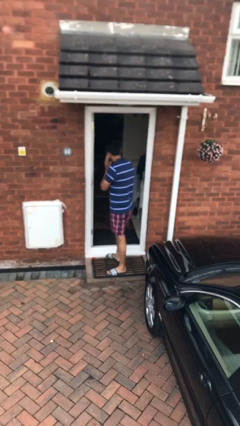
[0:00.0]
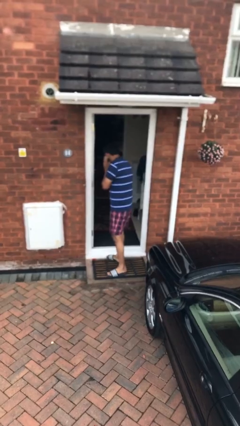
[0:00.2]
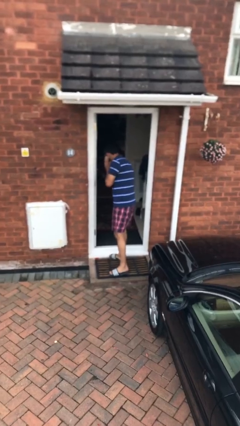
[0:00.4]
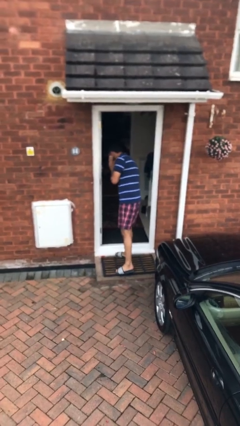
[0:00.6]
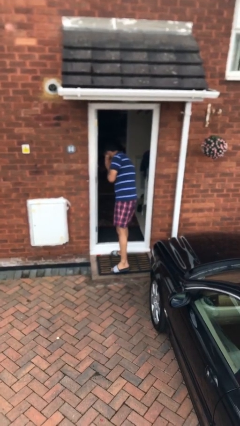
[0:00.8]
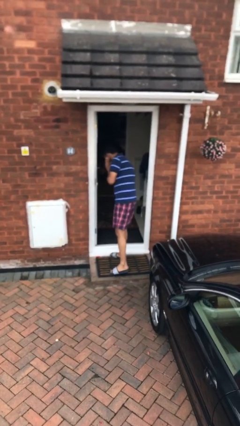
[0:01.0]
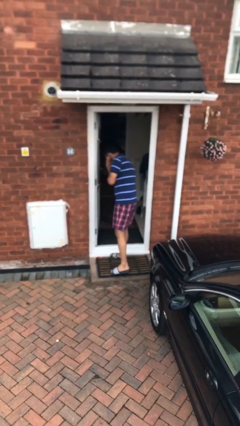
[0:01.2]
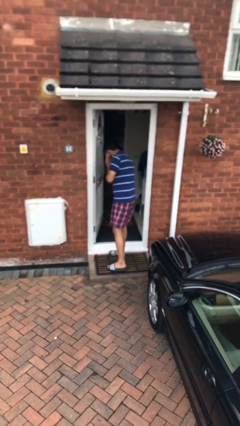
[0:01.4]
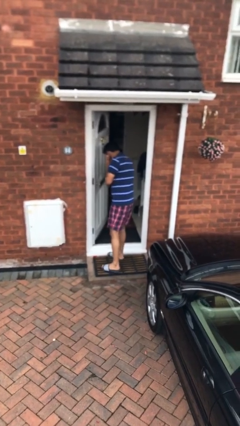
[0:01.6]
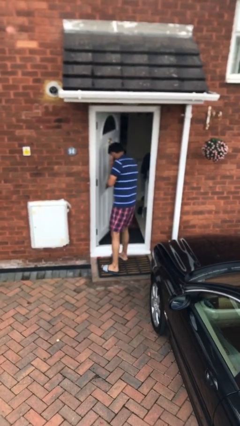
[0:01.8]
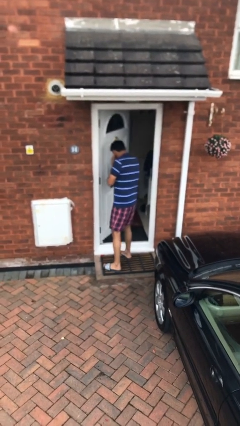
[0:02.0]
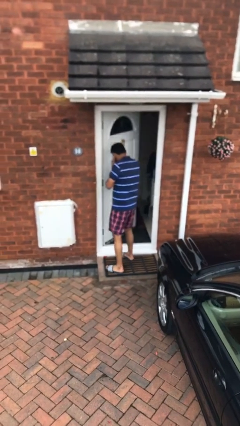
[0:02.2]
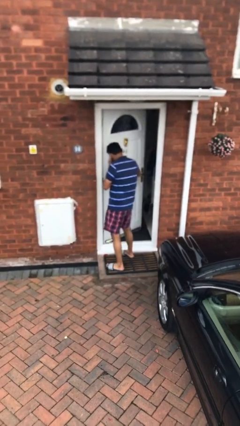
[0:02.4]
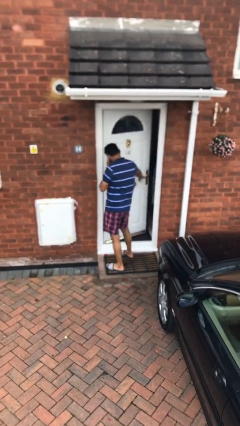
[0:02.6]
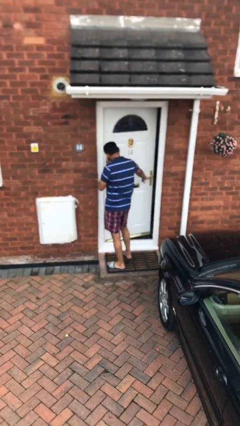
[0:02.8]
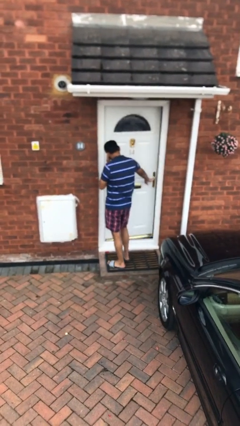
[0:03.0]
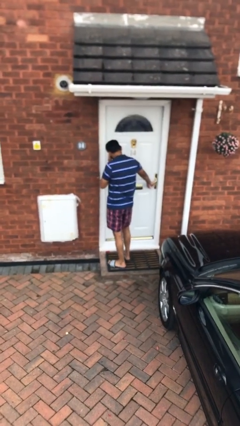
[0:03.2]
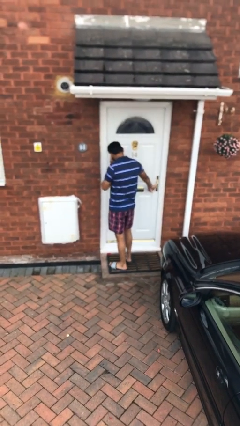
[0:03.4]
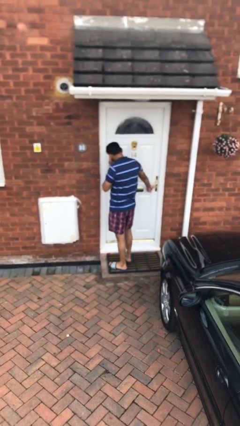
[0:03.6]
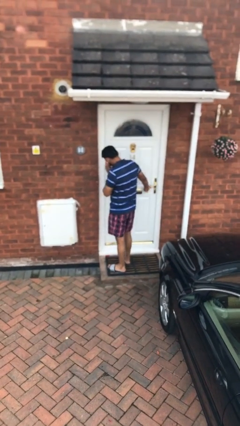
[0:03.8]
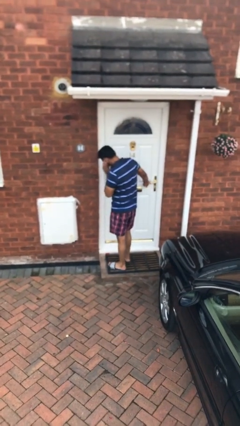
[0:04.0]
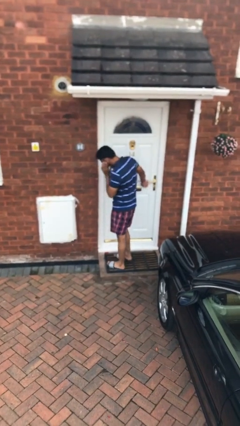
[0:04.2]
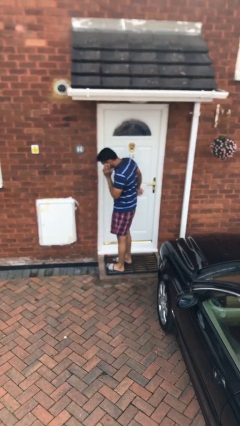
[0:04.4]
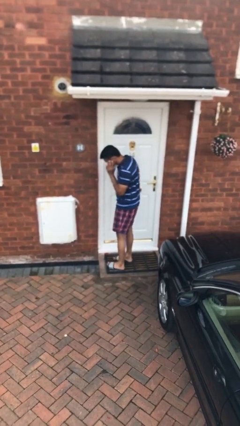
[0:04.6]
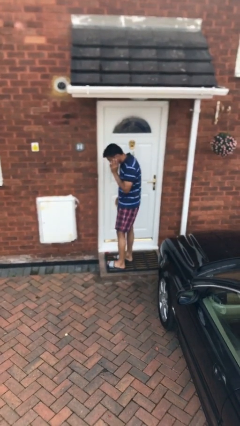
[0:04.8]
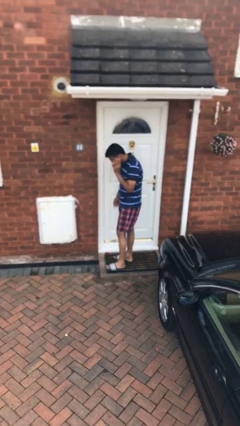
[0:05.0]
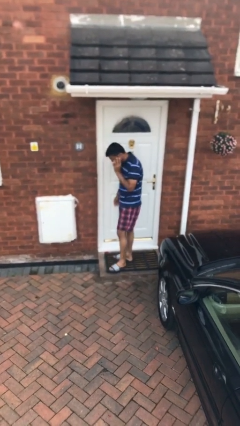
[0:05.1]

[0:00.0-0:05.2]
person closes facility door

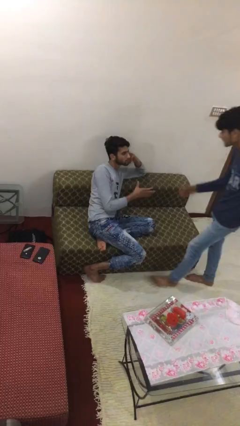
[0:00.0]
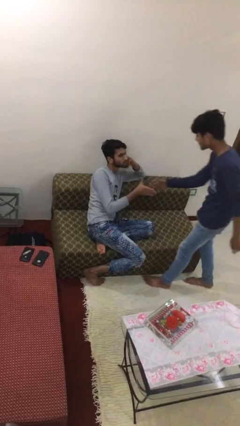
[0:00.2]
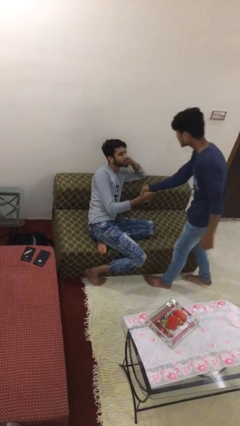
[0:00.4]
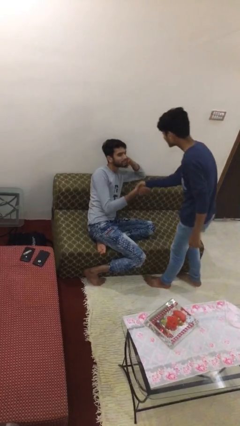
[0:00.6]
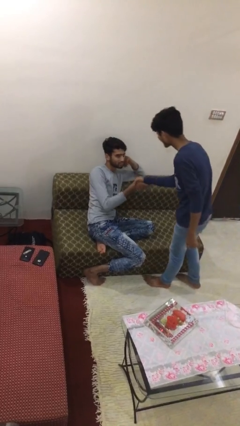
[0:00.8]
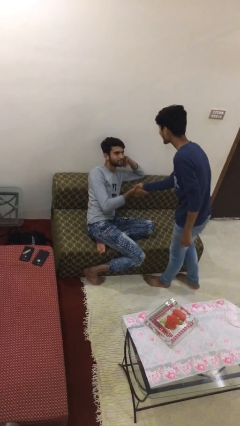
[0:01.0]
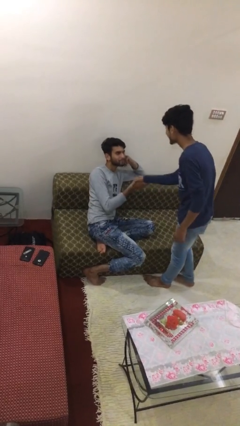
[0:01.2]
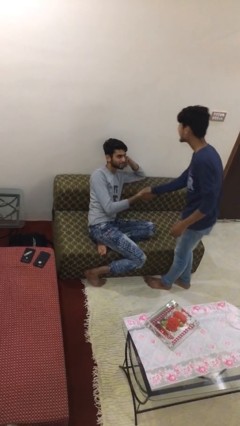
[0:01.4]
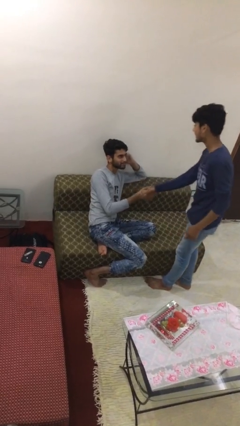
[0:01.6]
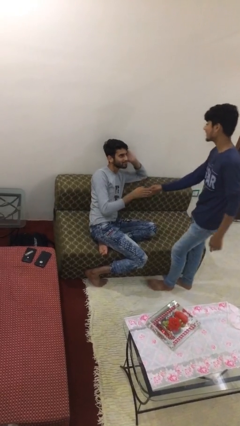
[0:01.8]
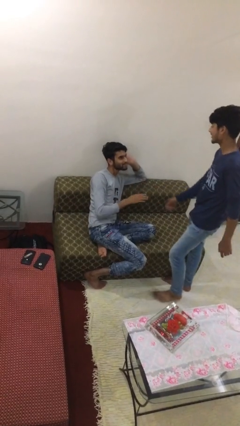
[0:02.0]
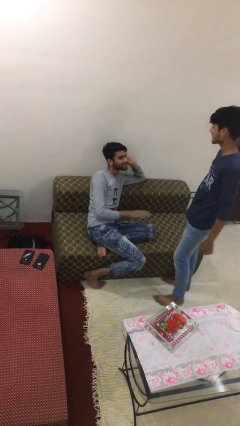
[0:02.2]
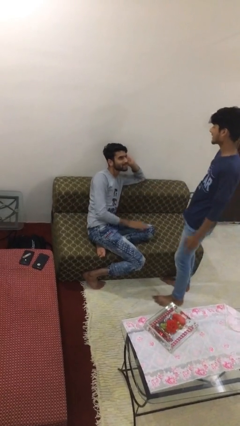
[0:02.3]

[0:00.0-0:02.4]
person shakes hand

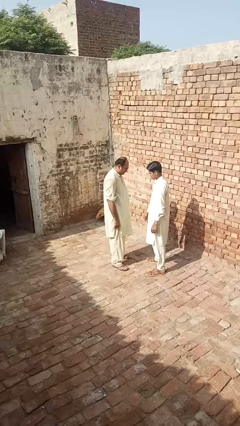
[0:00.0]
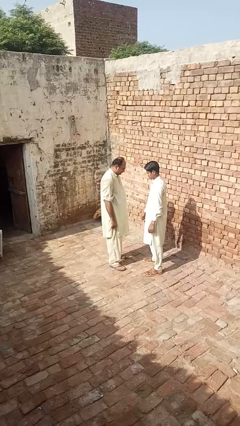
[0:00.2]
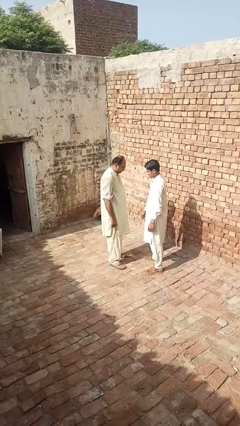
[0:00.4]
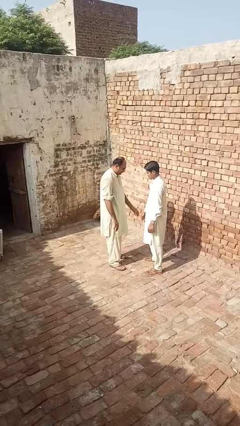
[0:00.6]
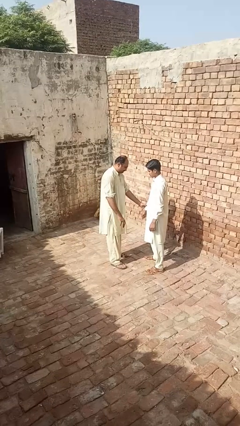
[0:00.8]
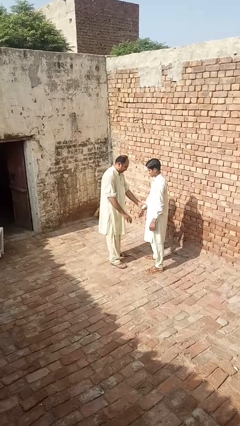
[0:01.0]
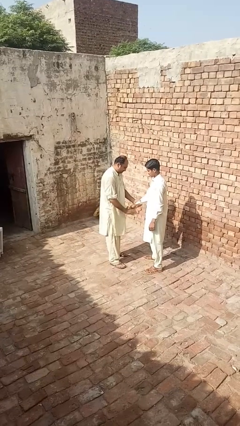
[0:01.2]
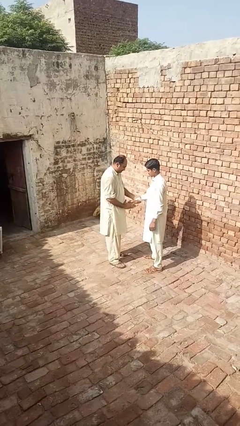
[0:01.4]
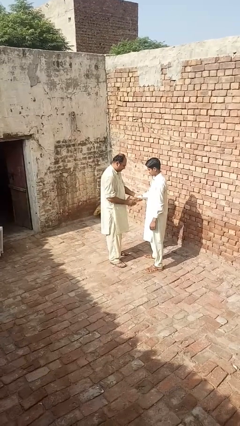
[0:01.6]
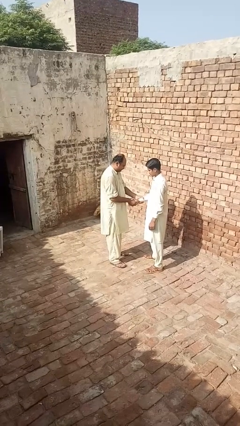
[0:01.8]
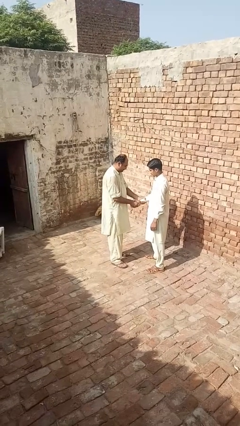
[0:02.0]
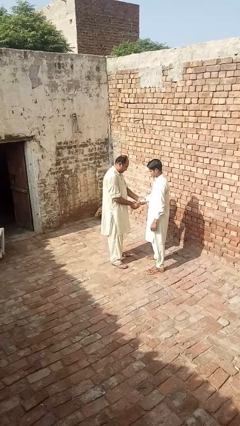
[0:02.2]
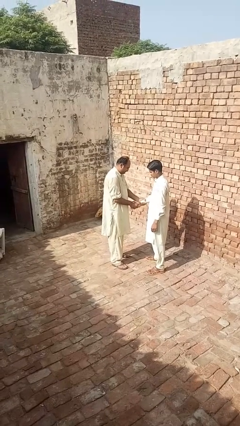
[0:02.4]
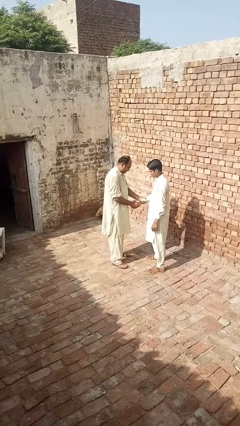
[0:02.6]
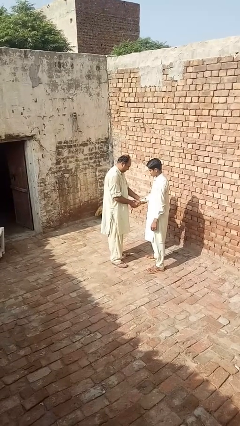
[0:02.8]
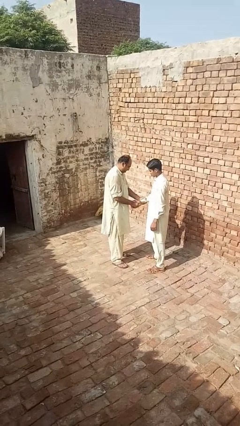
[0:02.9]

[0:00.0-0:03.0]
person grabs person by forearm

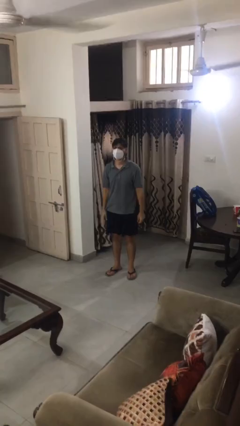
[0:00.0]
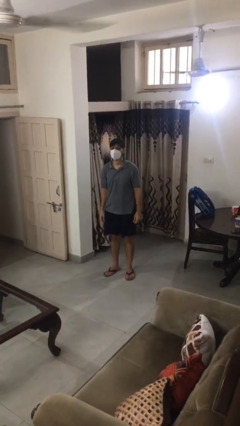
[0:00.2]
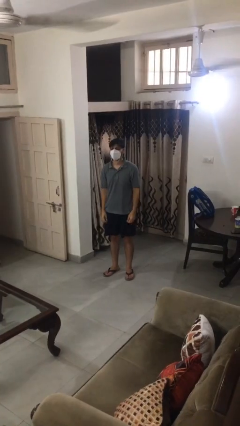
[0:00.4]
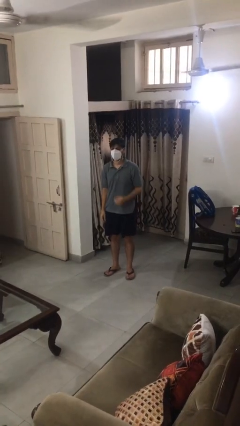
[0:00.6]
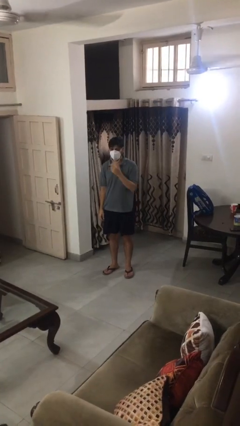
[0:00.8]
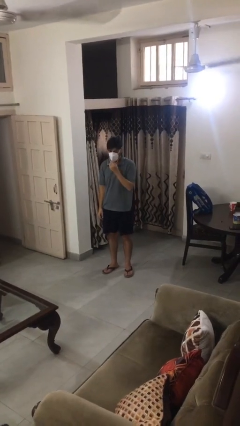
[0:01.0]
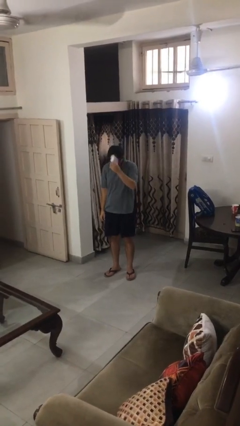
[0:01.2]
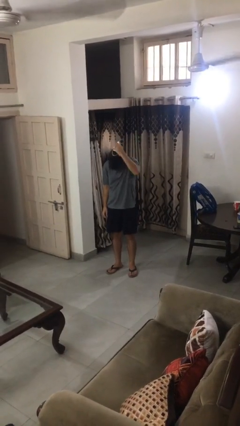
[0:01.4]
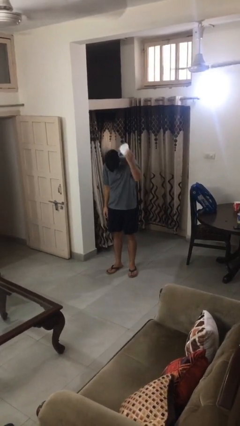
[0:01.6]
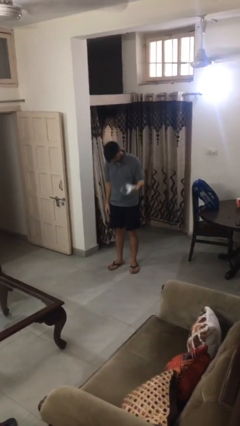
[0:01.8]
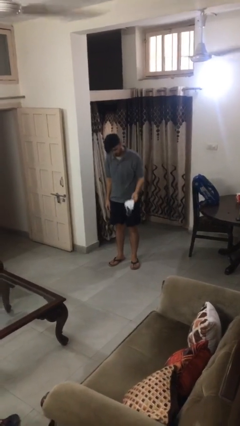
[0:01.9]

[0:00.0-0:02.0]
person takes off facemask

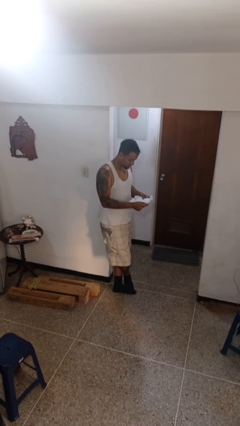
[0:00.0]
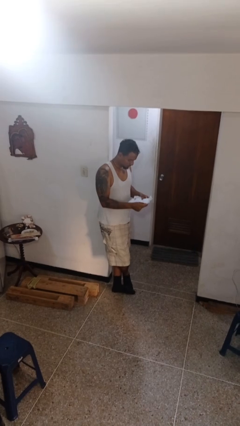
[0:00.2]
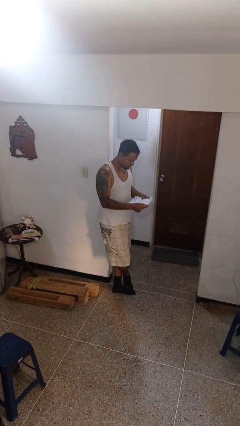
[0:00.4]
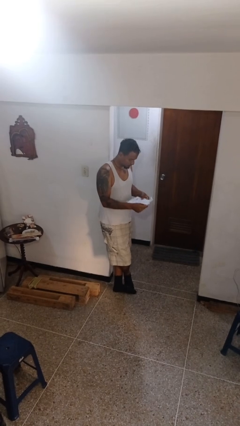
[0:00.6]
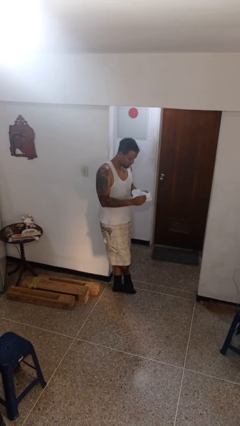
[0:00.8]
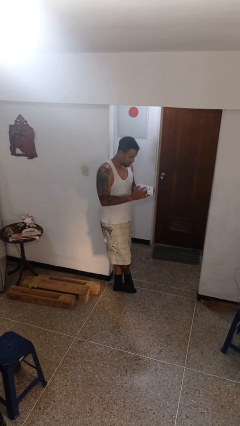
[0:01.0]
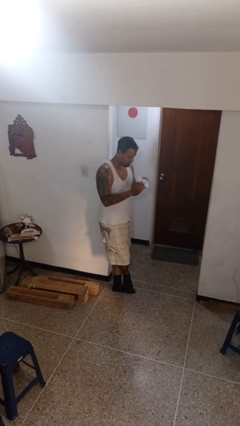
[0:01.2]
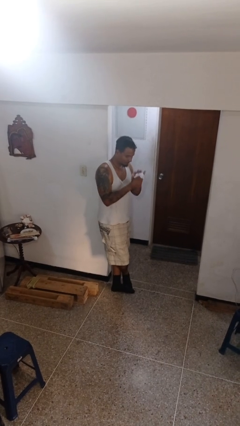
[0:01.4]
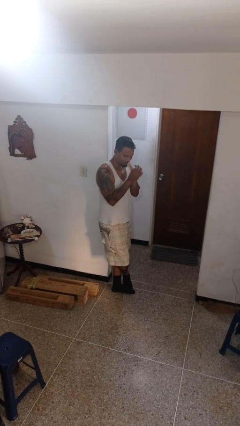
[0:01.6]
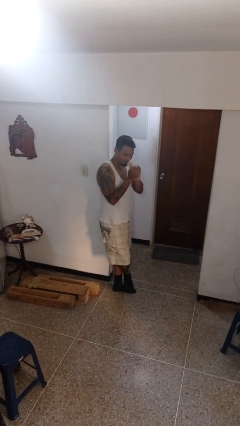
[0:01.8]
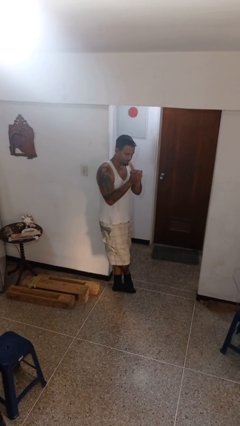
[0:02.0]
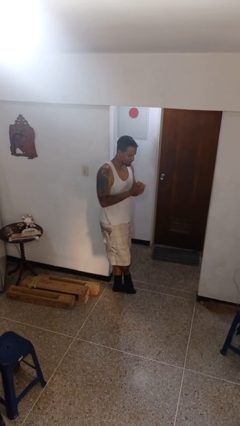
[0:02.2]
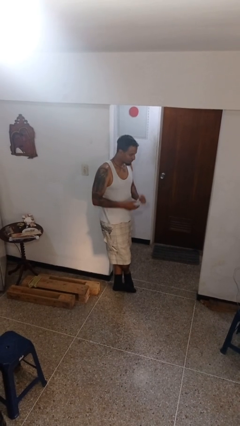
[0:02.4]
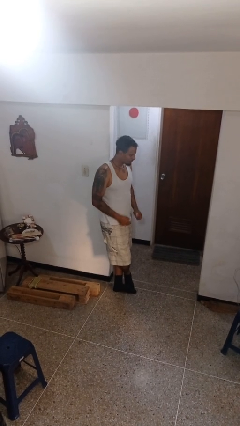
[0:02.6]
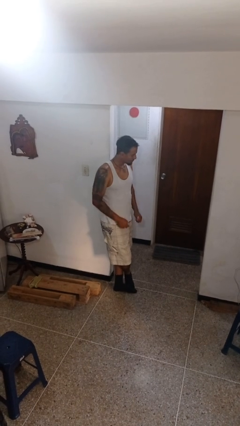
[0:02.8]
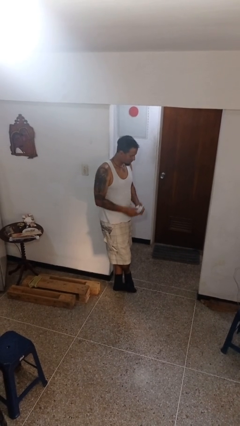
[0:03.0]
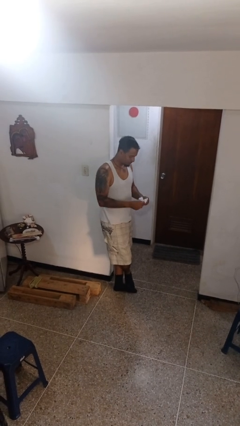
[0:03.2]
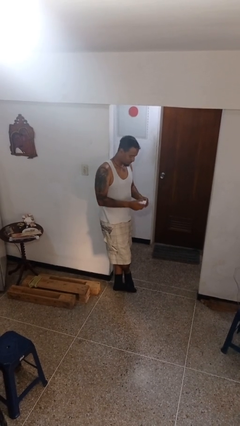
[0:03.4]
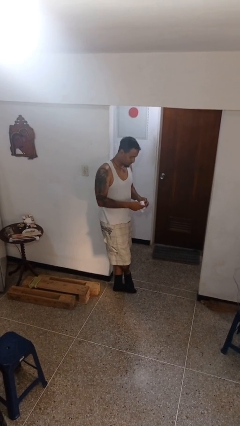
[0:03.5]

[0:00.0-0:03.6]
person crumples paper

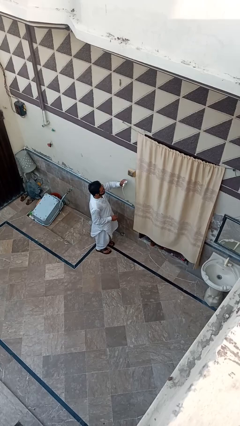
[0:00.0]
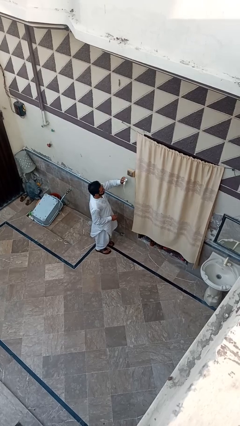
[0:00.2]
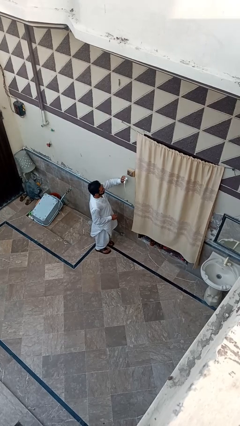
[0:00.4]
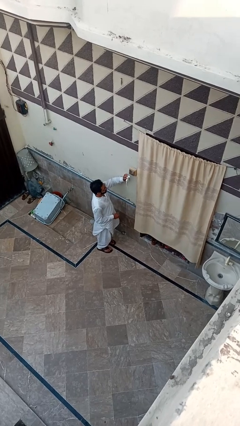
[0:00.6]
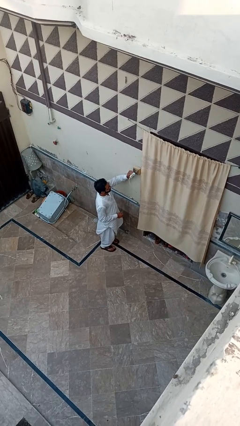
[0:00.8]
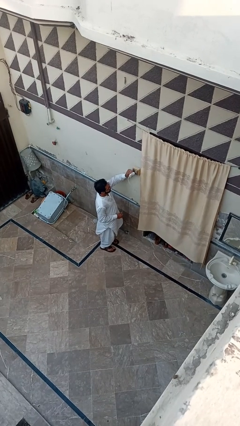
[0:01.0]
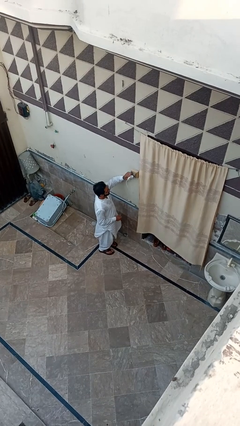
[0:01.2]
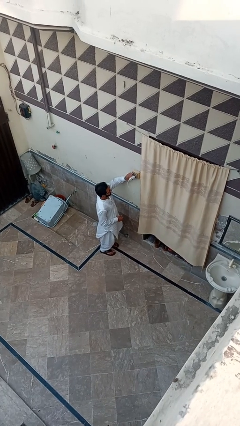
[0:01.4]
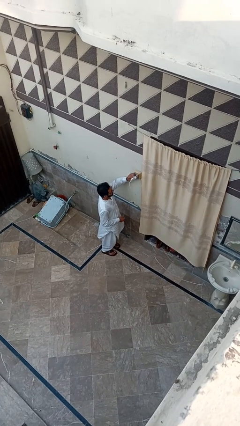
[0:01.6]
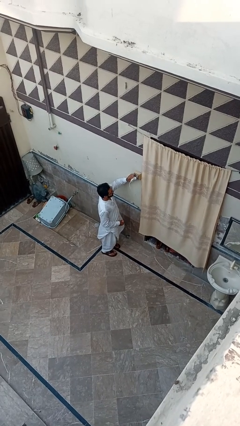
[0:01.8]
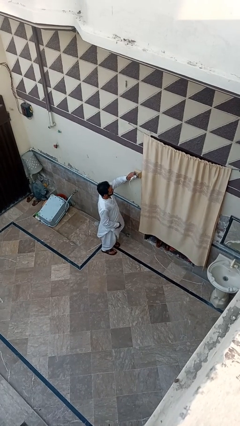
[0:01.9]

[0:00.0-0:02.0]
person plugs into electrical socket
